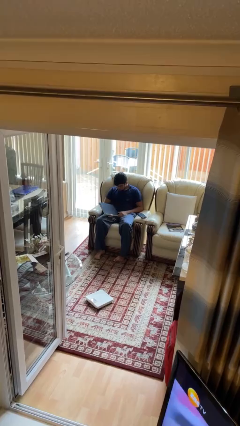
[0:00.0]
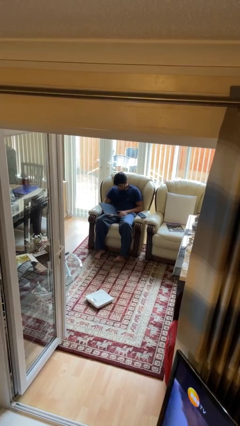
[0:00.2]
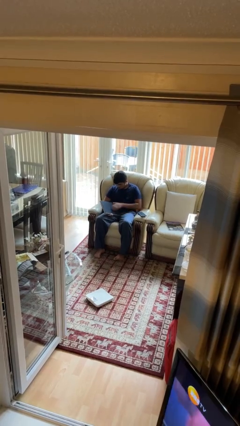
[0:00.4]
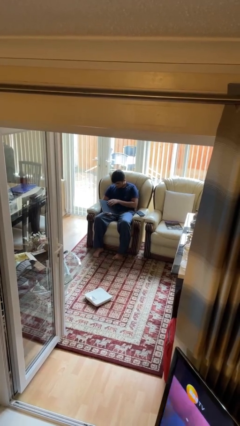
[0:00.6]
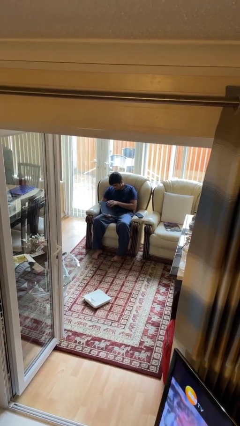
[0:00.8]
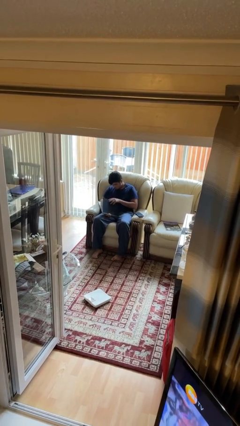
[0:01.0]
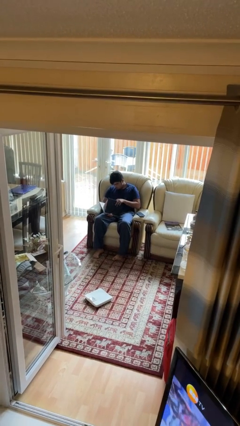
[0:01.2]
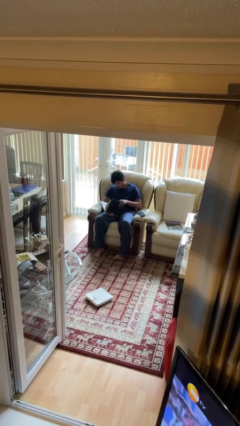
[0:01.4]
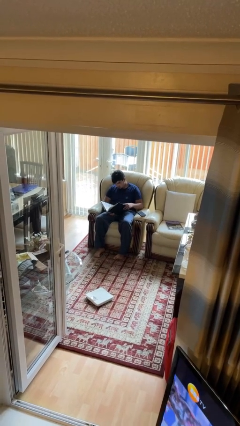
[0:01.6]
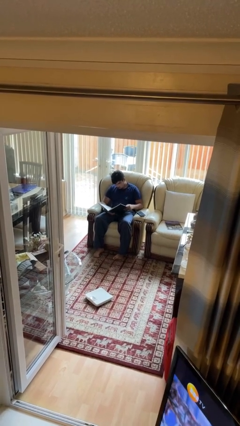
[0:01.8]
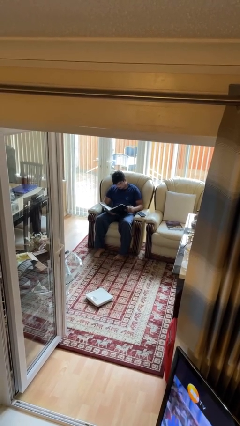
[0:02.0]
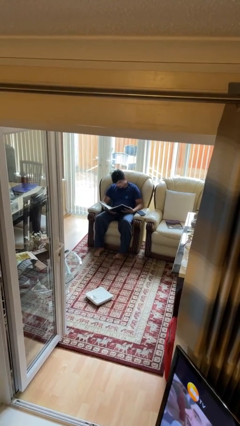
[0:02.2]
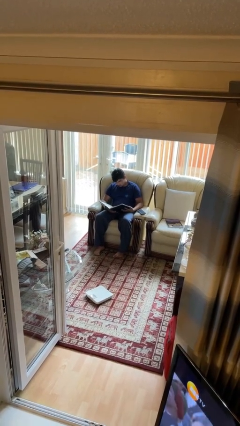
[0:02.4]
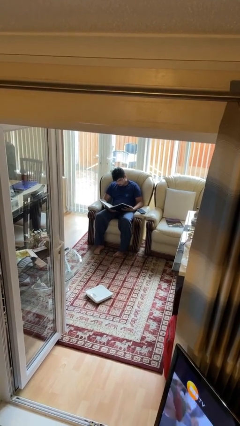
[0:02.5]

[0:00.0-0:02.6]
person reads book

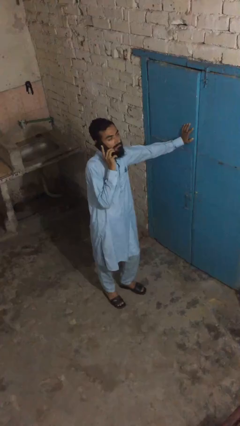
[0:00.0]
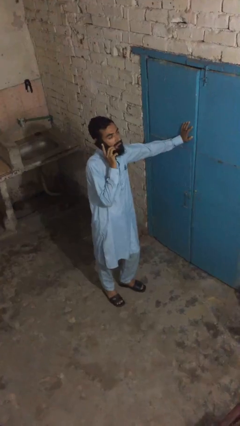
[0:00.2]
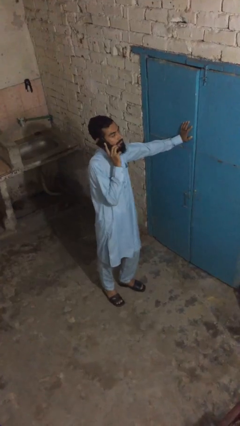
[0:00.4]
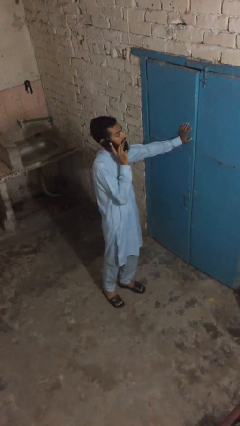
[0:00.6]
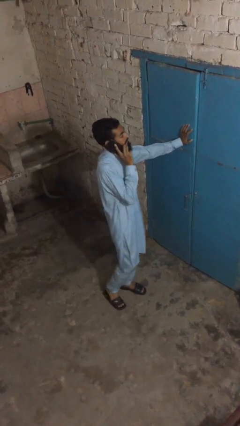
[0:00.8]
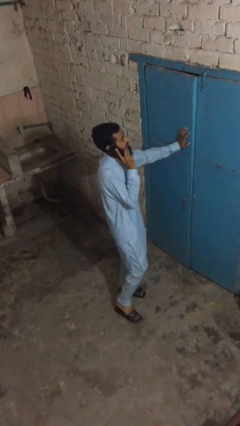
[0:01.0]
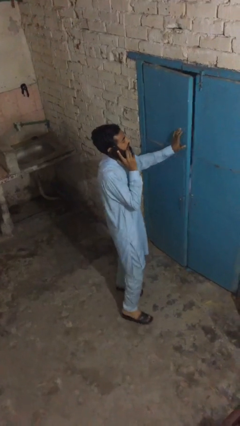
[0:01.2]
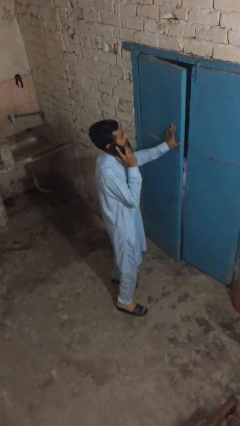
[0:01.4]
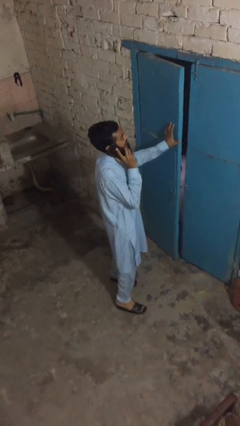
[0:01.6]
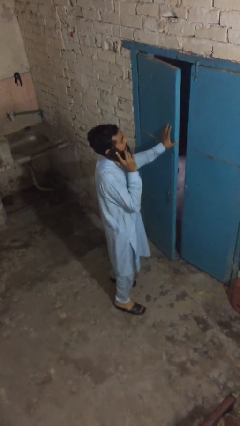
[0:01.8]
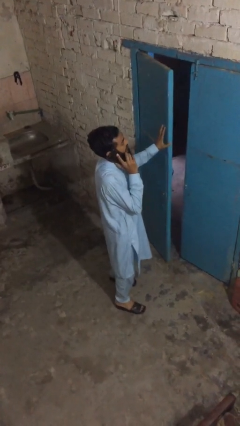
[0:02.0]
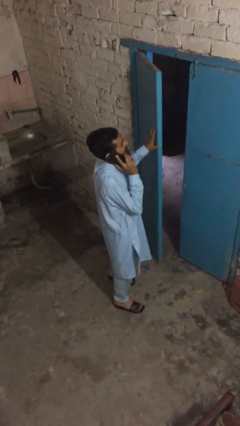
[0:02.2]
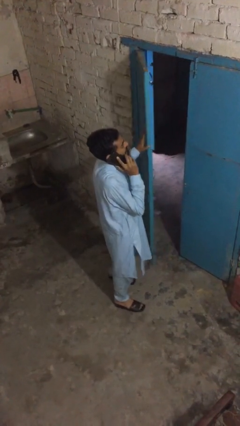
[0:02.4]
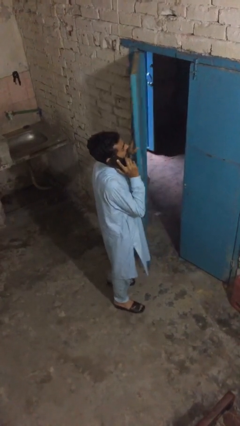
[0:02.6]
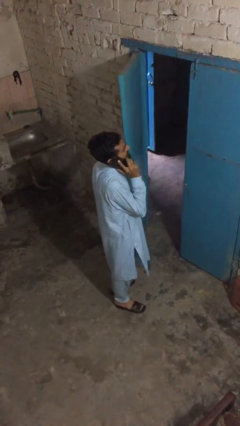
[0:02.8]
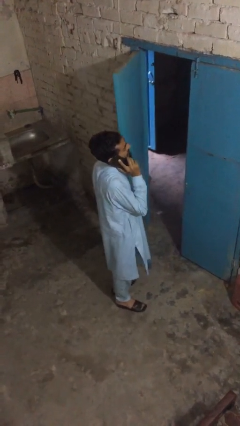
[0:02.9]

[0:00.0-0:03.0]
person opens facility door

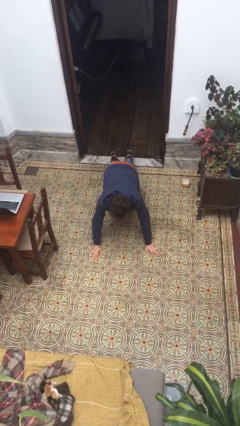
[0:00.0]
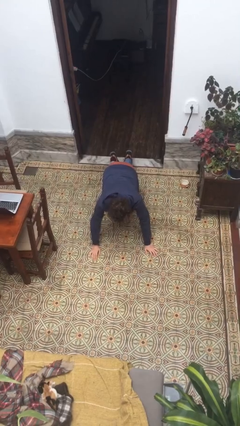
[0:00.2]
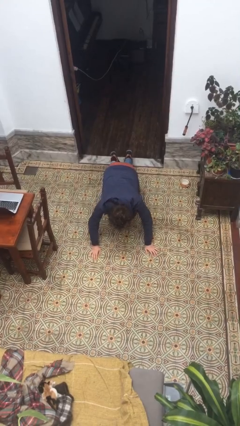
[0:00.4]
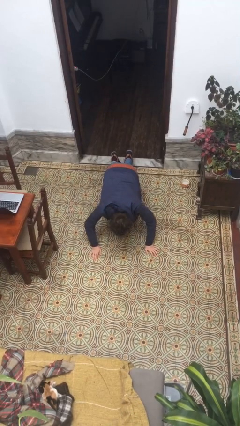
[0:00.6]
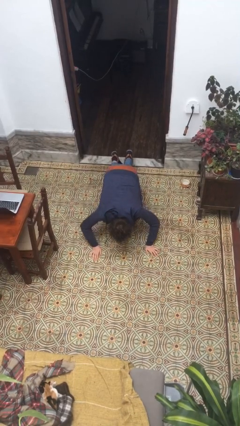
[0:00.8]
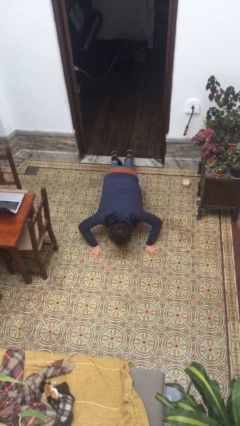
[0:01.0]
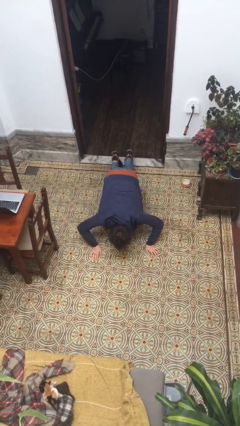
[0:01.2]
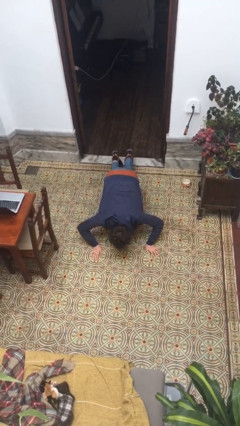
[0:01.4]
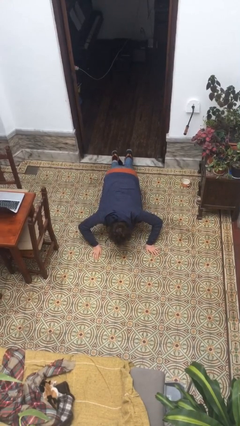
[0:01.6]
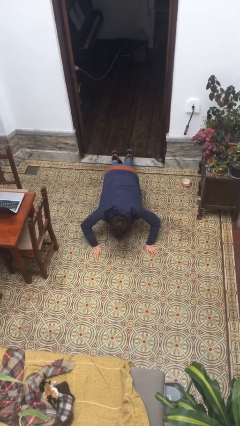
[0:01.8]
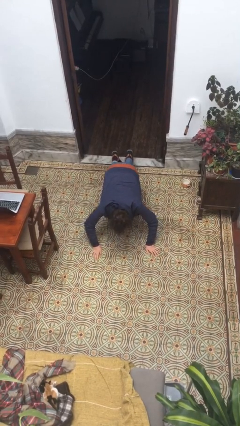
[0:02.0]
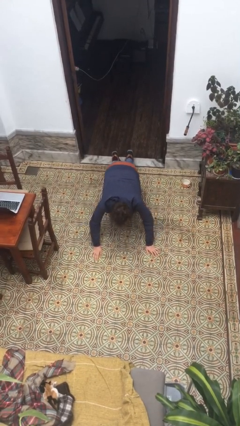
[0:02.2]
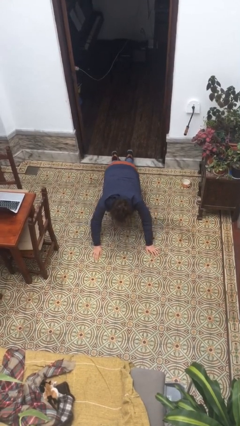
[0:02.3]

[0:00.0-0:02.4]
person exercises with pushup

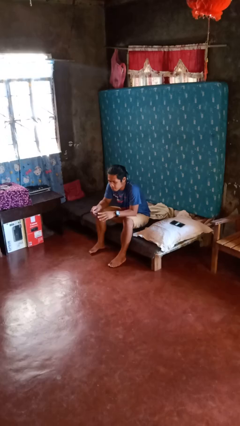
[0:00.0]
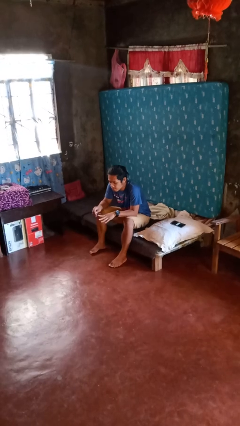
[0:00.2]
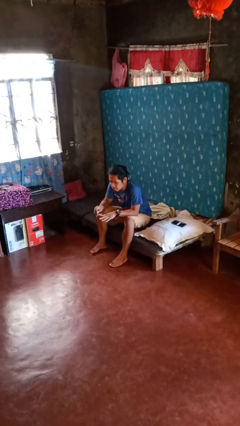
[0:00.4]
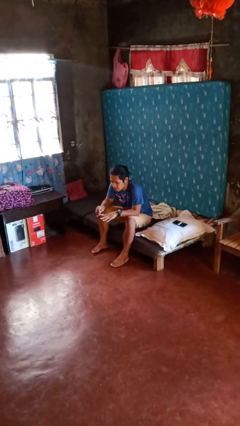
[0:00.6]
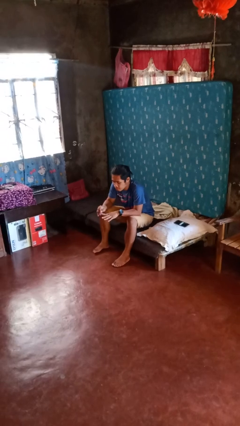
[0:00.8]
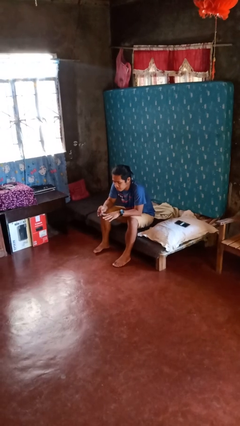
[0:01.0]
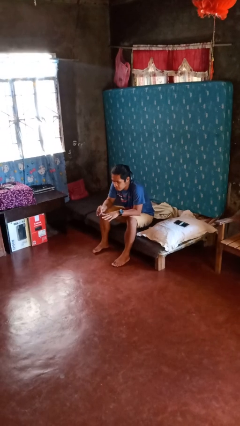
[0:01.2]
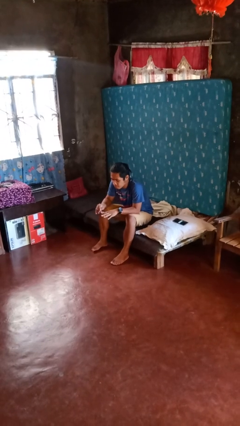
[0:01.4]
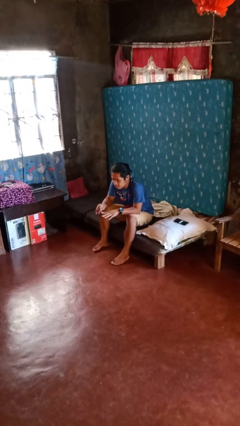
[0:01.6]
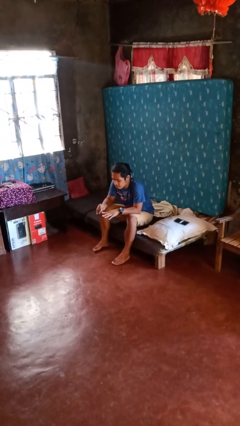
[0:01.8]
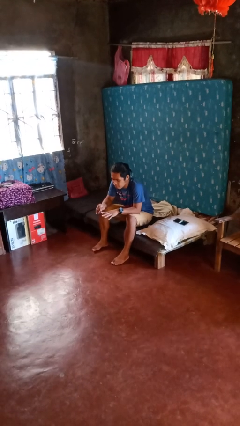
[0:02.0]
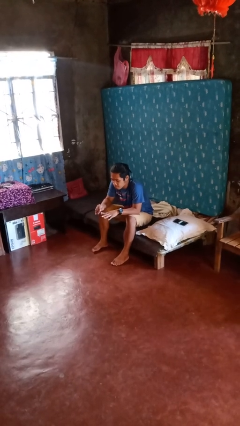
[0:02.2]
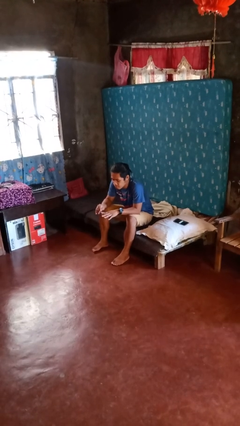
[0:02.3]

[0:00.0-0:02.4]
person files fingernails

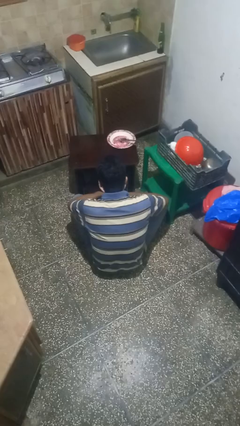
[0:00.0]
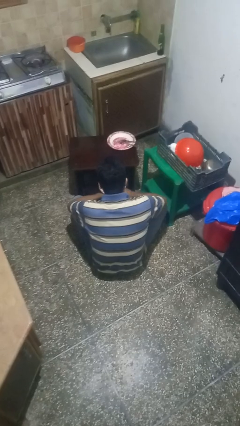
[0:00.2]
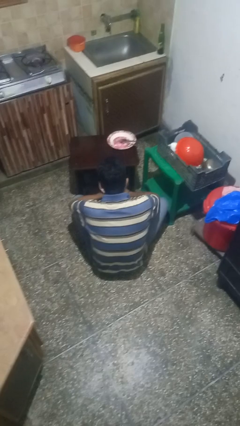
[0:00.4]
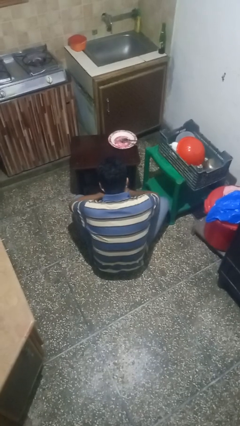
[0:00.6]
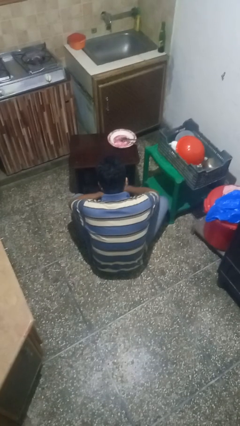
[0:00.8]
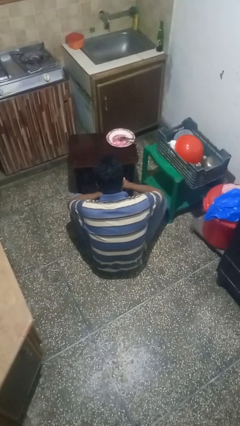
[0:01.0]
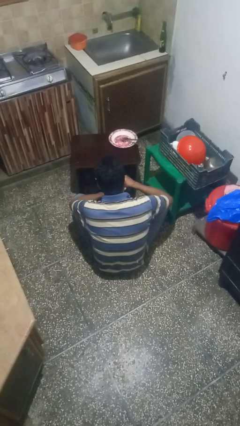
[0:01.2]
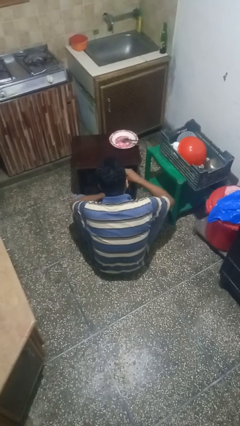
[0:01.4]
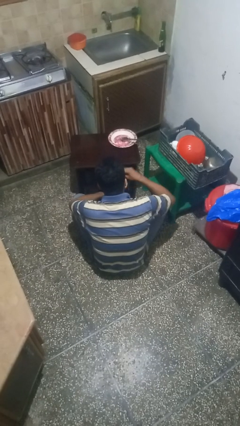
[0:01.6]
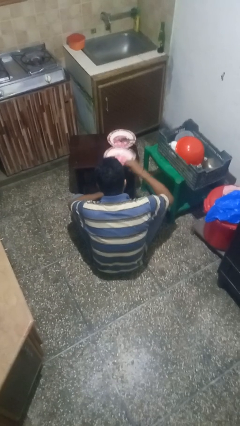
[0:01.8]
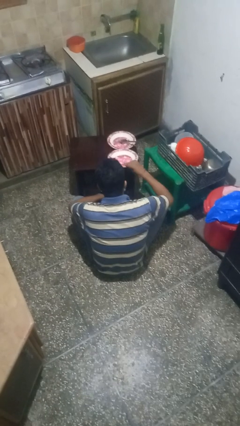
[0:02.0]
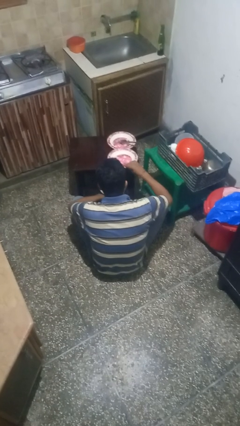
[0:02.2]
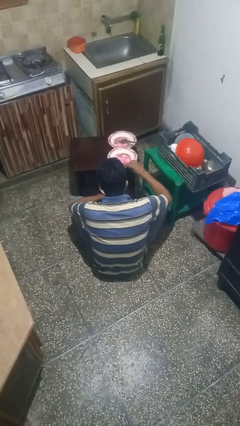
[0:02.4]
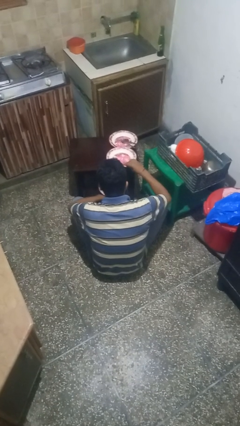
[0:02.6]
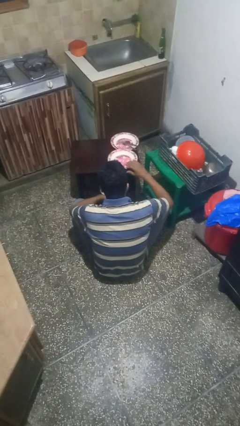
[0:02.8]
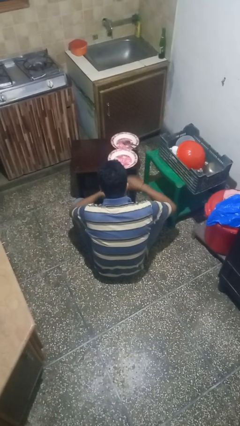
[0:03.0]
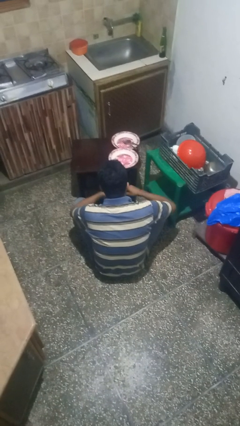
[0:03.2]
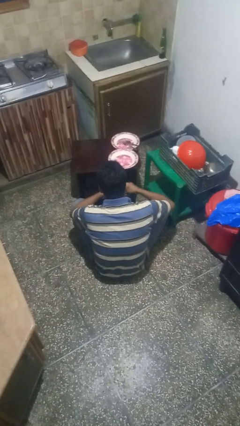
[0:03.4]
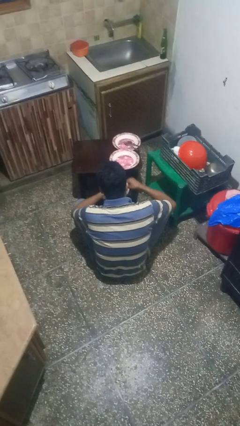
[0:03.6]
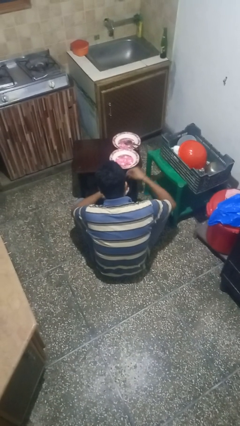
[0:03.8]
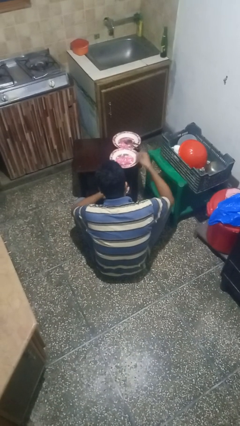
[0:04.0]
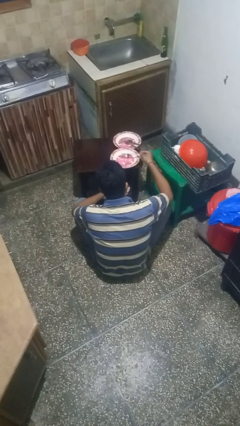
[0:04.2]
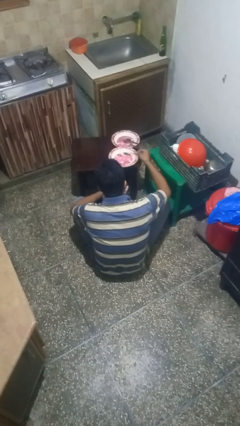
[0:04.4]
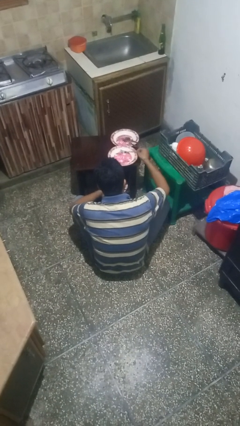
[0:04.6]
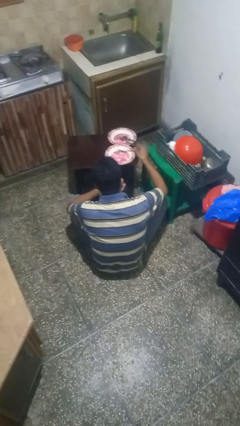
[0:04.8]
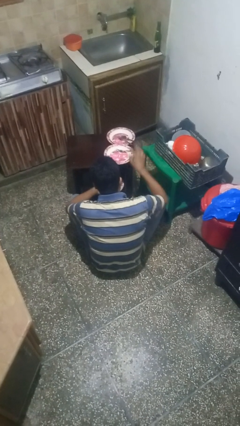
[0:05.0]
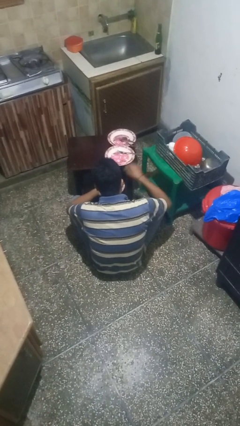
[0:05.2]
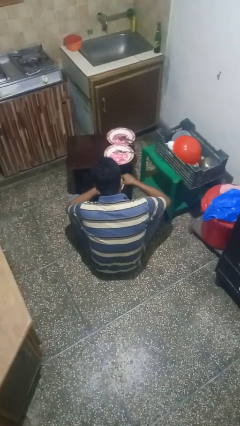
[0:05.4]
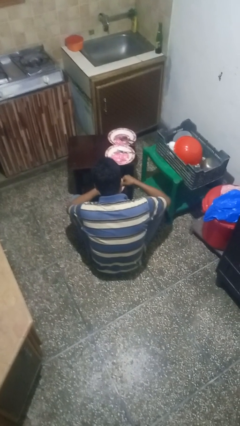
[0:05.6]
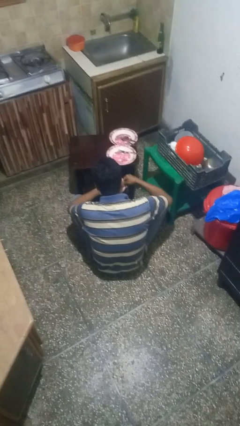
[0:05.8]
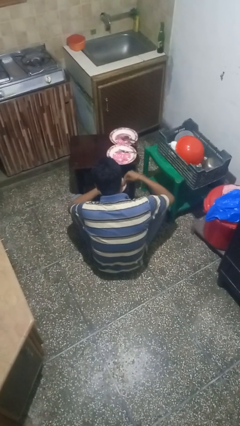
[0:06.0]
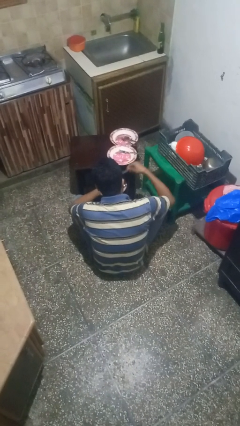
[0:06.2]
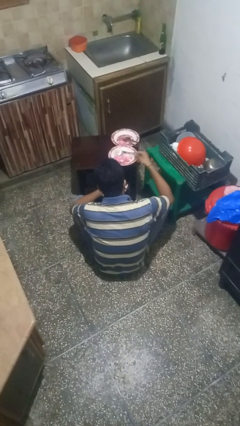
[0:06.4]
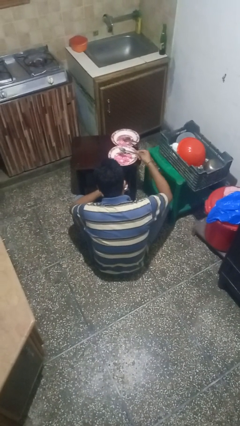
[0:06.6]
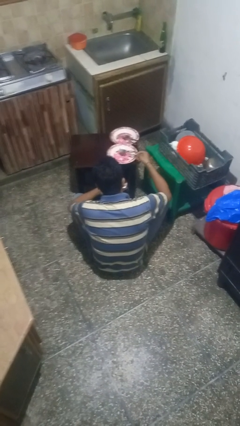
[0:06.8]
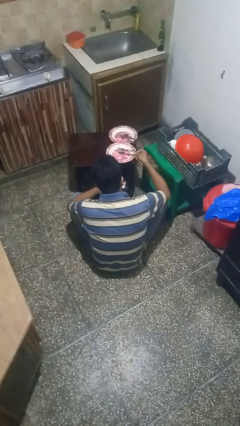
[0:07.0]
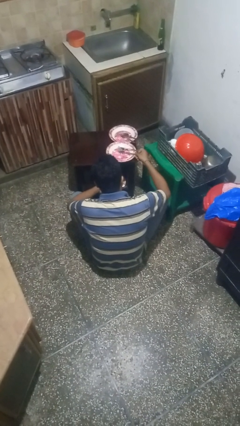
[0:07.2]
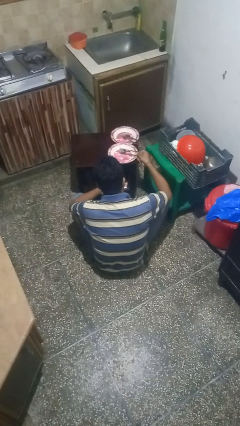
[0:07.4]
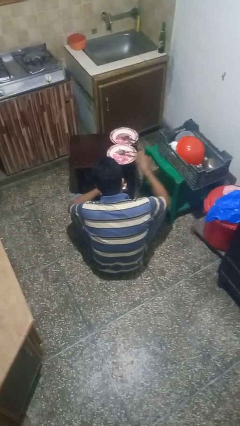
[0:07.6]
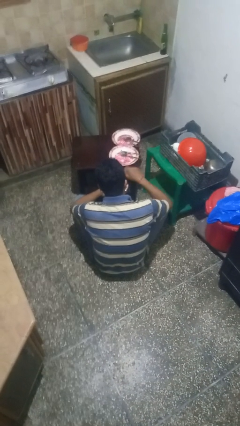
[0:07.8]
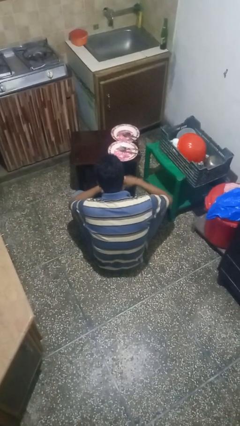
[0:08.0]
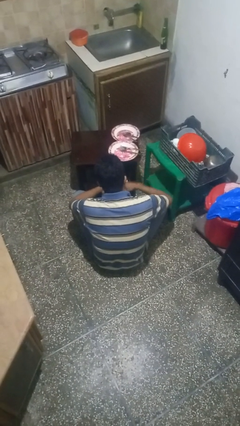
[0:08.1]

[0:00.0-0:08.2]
person sets table
